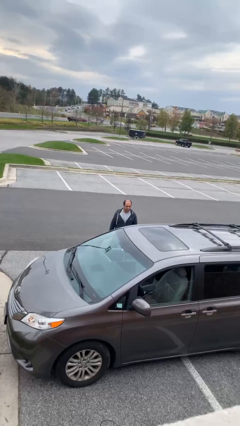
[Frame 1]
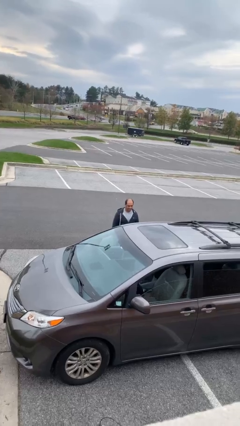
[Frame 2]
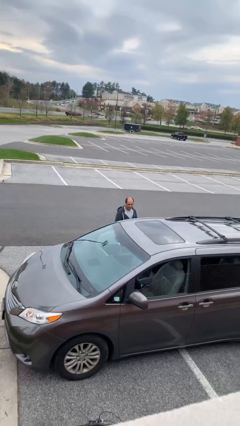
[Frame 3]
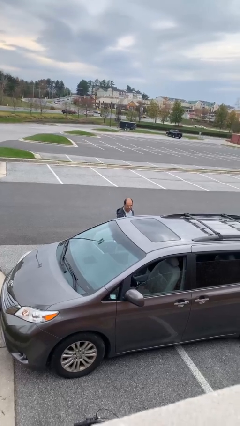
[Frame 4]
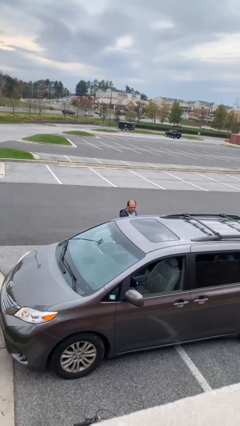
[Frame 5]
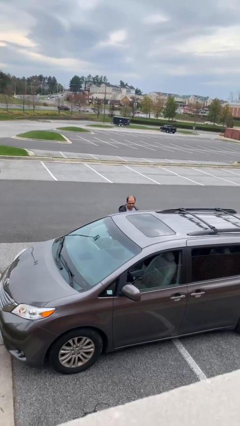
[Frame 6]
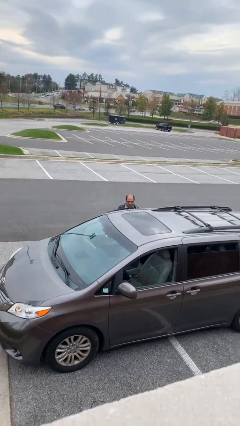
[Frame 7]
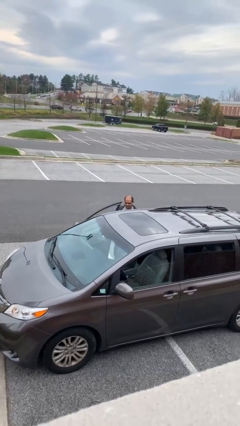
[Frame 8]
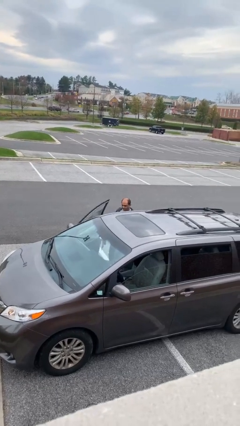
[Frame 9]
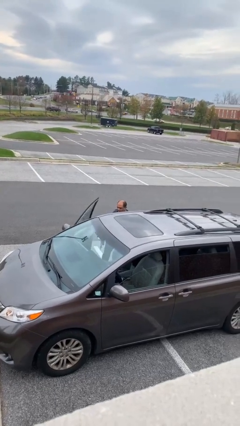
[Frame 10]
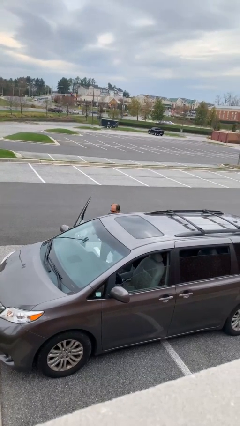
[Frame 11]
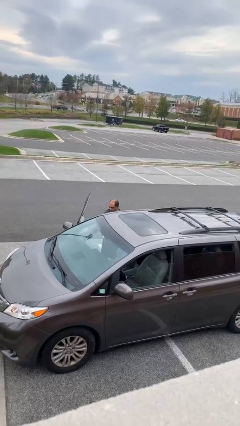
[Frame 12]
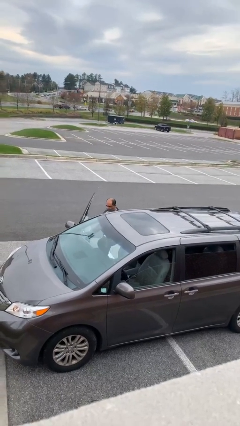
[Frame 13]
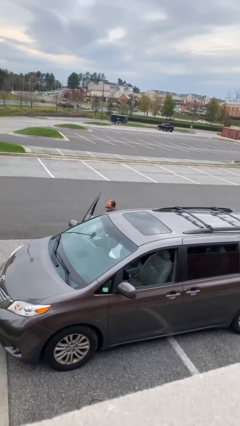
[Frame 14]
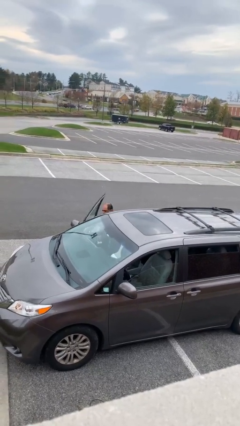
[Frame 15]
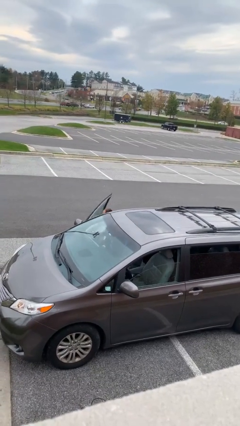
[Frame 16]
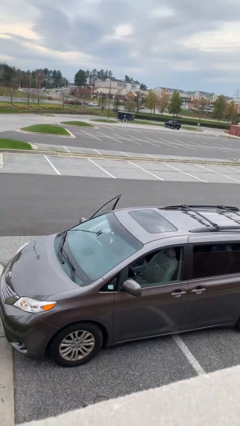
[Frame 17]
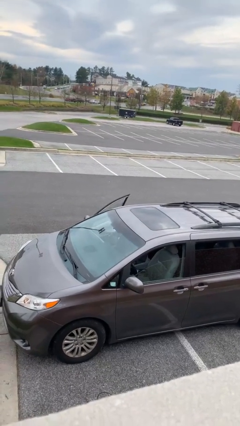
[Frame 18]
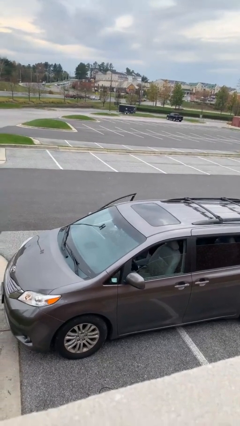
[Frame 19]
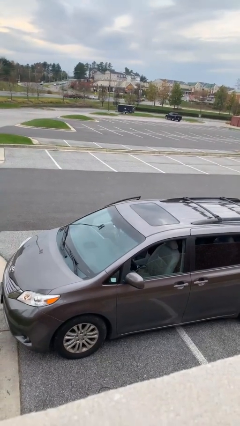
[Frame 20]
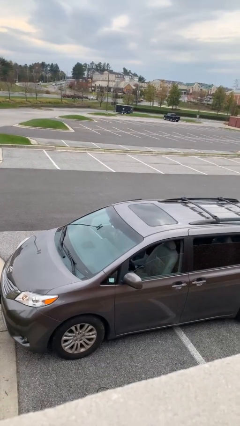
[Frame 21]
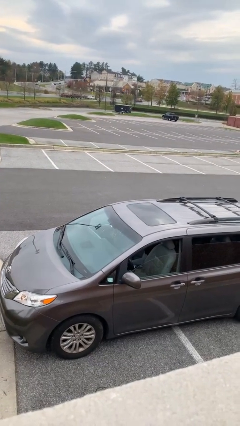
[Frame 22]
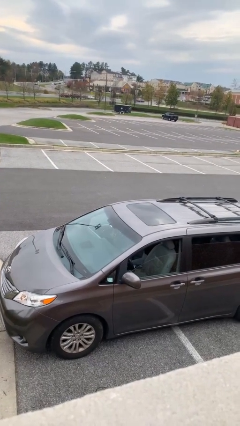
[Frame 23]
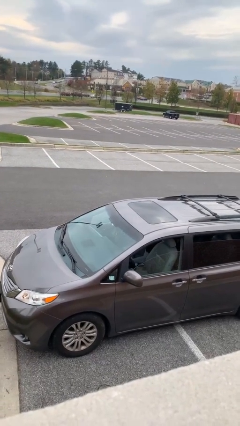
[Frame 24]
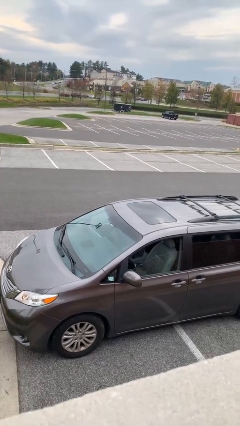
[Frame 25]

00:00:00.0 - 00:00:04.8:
car picks up person

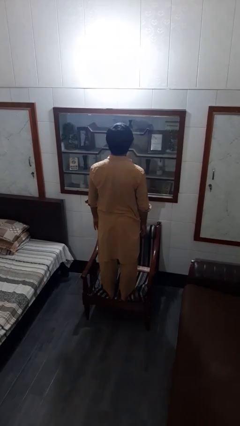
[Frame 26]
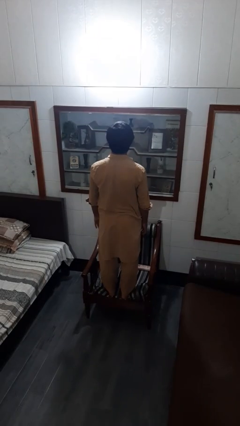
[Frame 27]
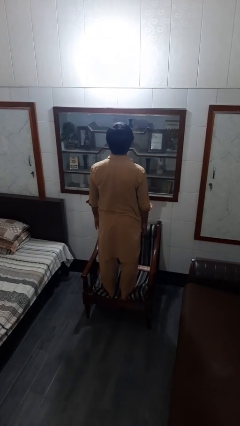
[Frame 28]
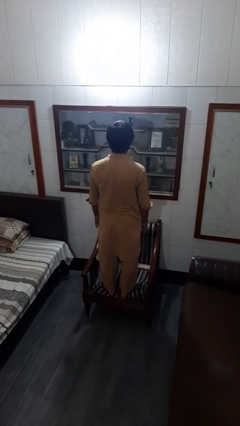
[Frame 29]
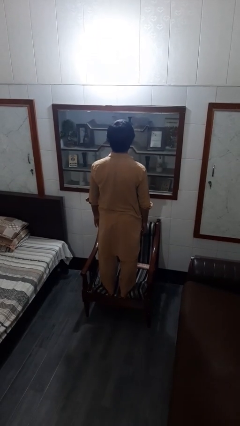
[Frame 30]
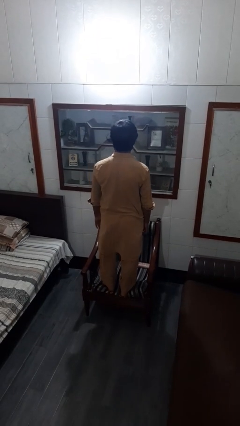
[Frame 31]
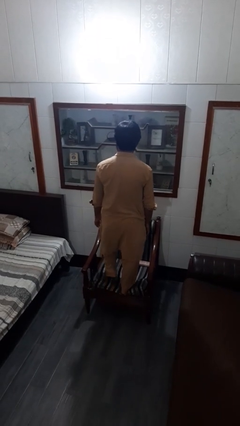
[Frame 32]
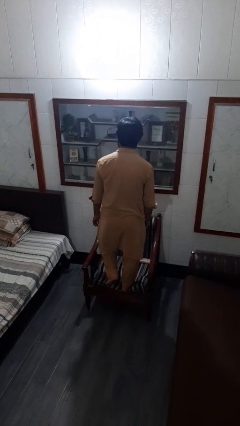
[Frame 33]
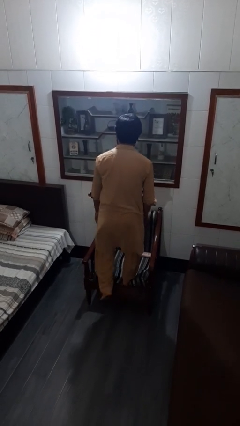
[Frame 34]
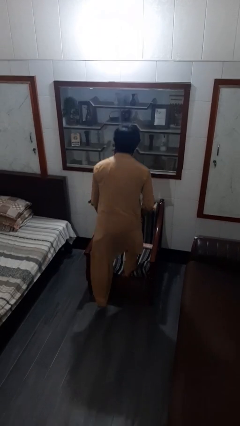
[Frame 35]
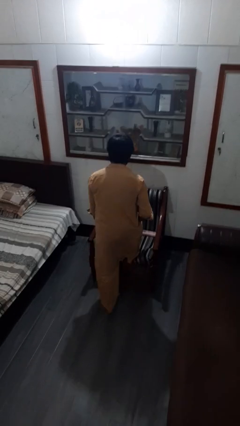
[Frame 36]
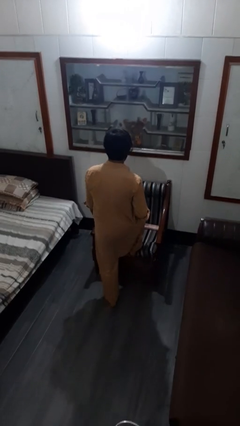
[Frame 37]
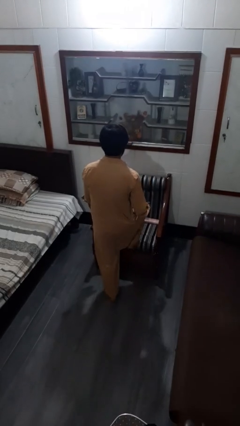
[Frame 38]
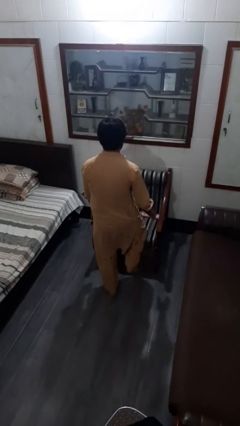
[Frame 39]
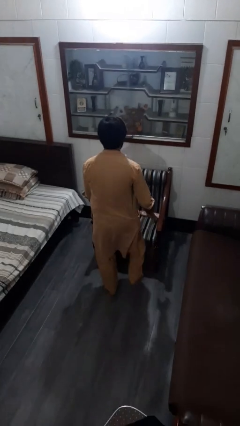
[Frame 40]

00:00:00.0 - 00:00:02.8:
person climbs off chair

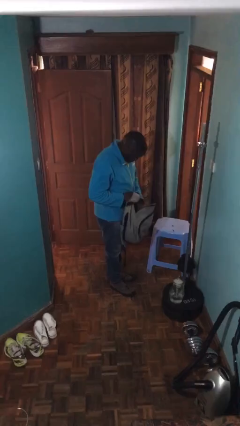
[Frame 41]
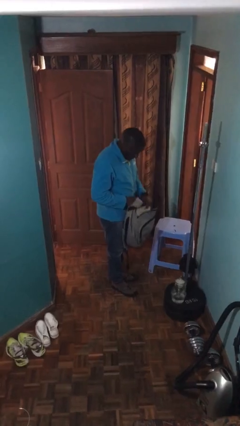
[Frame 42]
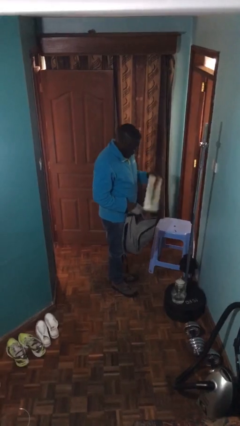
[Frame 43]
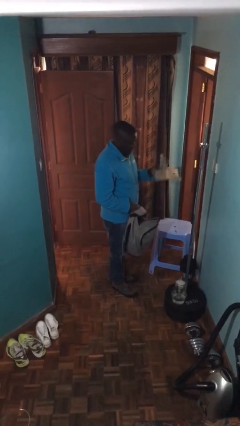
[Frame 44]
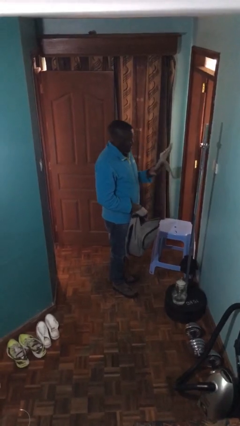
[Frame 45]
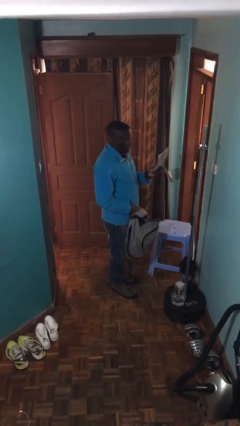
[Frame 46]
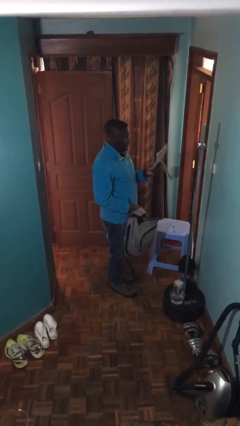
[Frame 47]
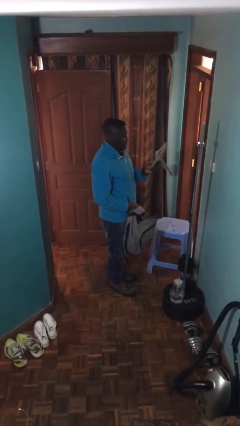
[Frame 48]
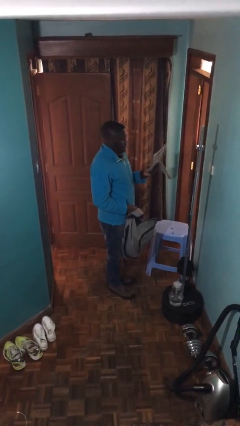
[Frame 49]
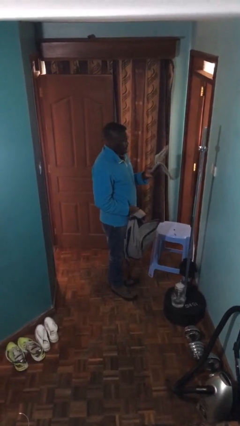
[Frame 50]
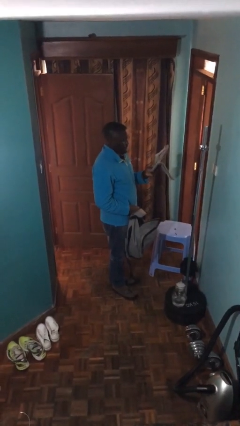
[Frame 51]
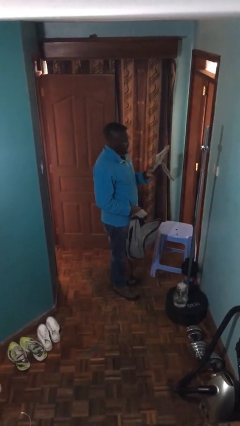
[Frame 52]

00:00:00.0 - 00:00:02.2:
person takes object from backpack

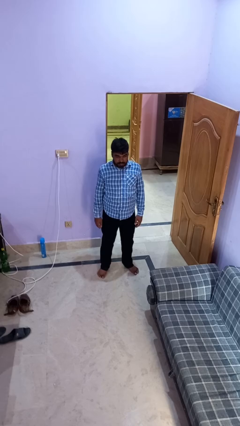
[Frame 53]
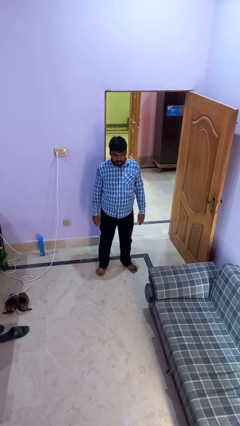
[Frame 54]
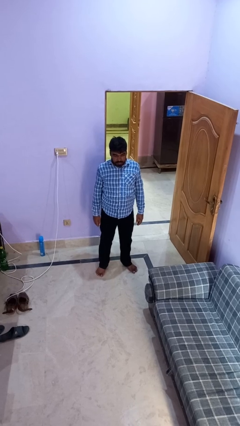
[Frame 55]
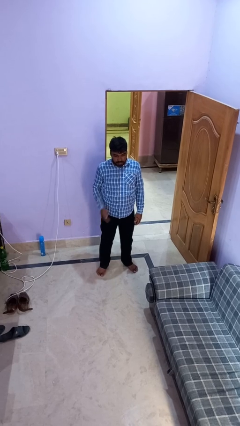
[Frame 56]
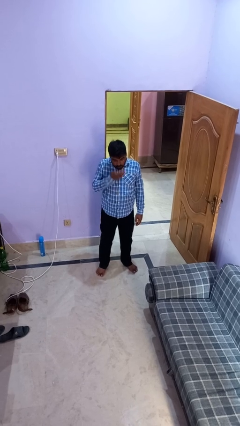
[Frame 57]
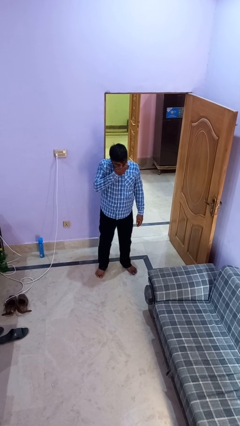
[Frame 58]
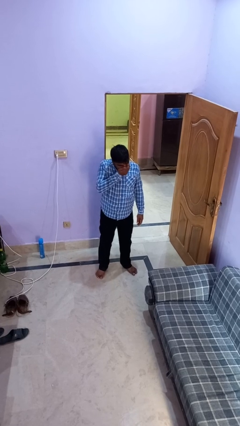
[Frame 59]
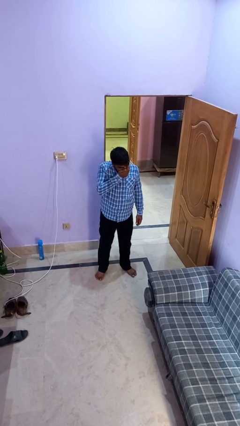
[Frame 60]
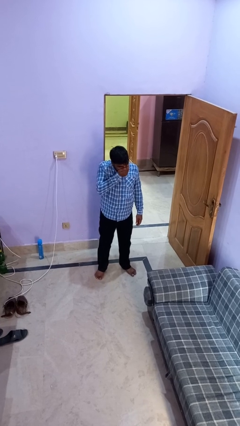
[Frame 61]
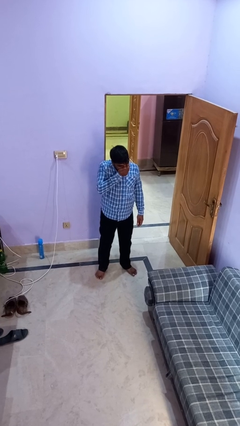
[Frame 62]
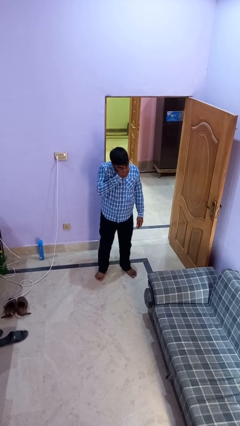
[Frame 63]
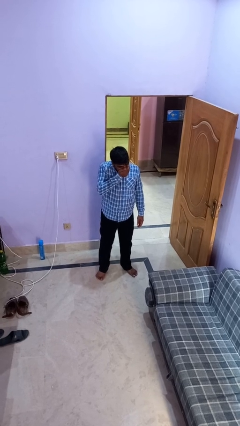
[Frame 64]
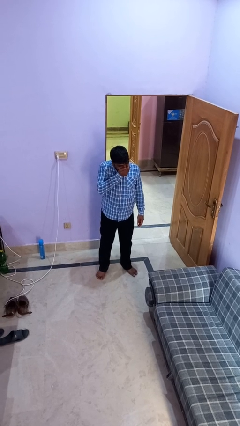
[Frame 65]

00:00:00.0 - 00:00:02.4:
person sneezes into hand

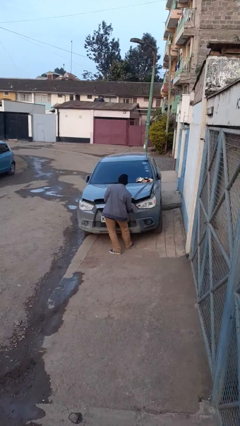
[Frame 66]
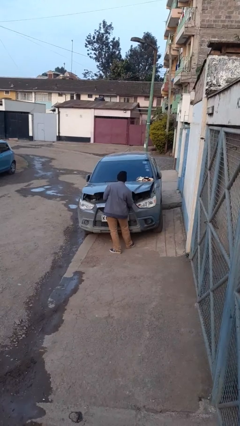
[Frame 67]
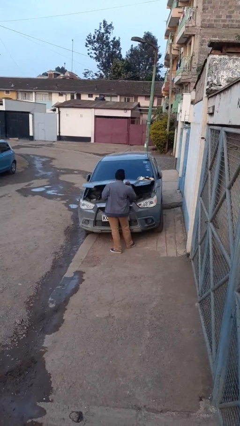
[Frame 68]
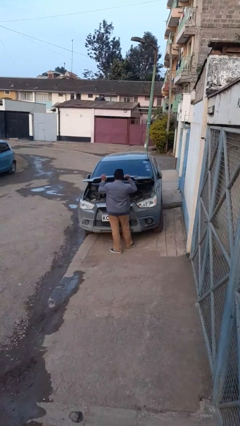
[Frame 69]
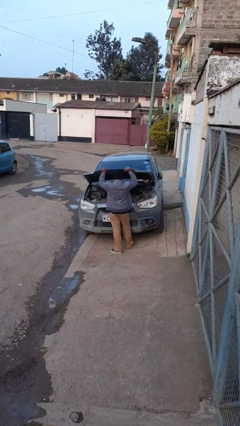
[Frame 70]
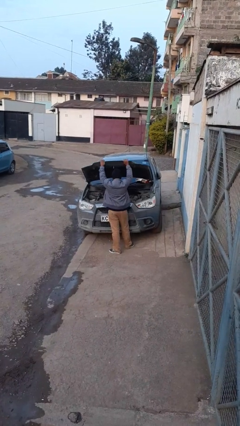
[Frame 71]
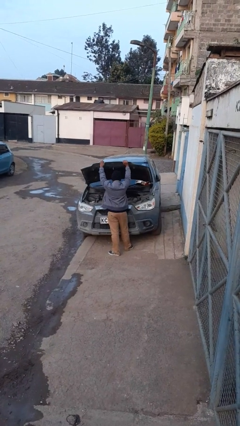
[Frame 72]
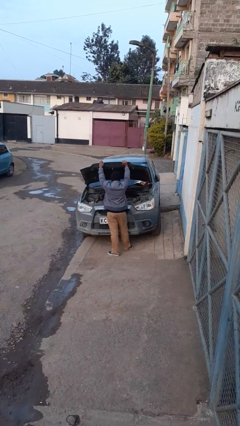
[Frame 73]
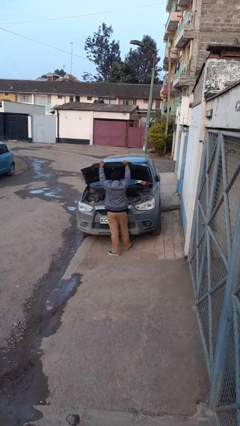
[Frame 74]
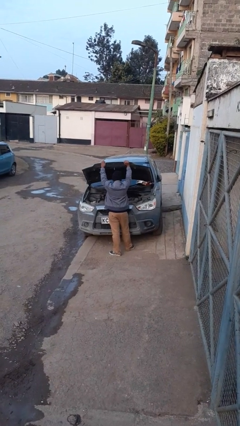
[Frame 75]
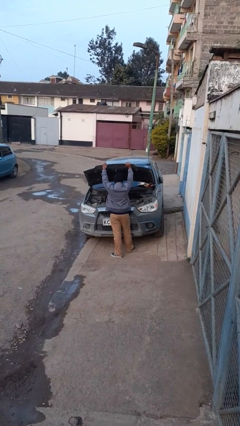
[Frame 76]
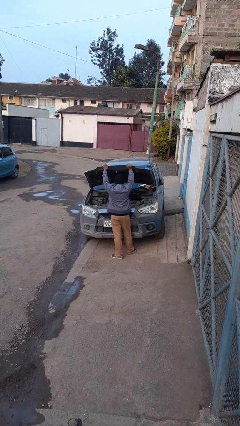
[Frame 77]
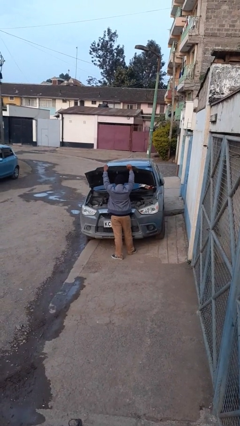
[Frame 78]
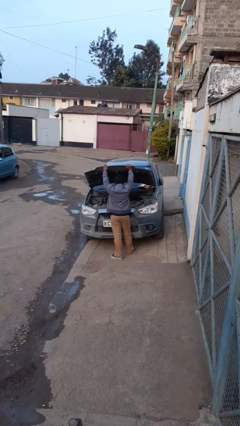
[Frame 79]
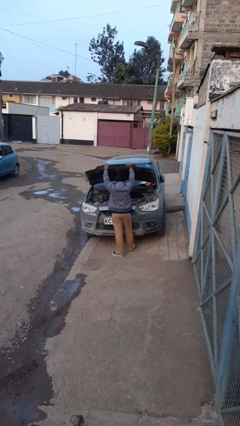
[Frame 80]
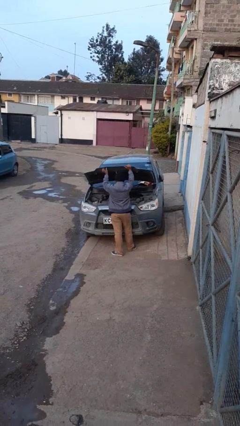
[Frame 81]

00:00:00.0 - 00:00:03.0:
person opens car hood

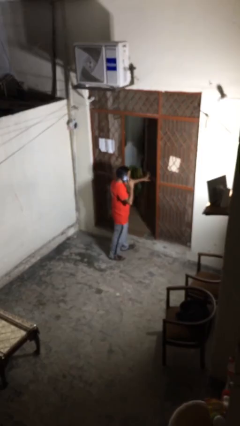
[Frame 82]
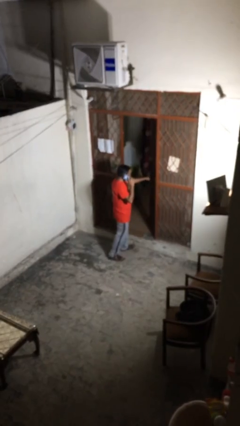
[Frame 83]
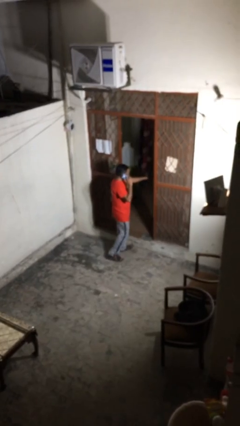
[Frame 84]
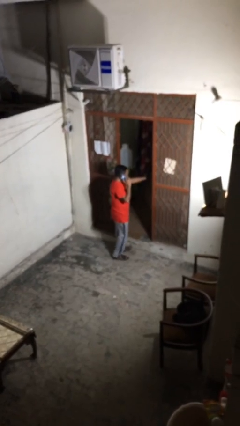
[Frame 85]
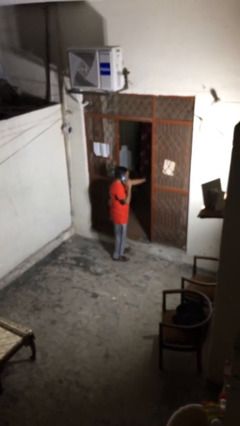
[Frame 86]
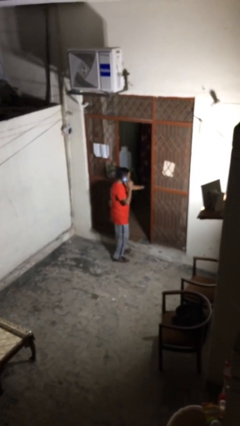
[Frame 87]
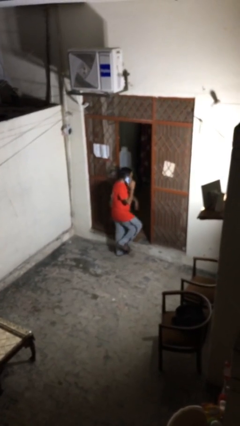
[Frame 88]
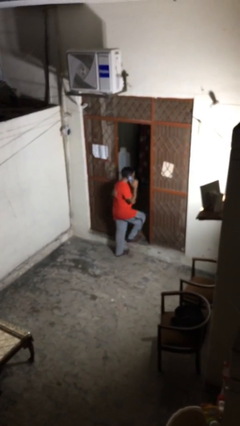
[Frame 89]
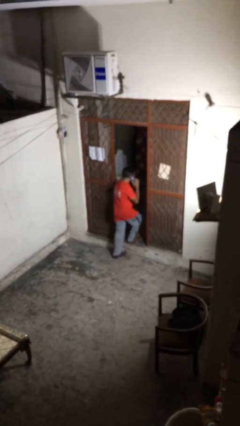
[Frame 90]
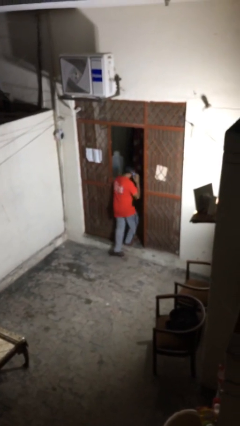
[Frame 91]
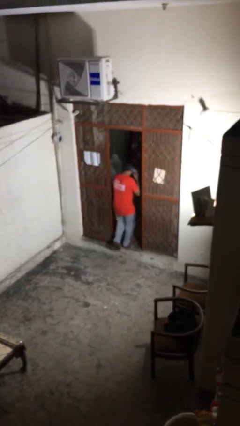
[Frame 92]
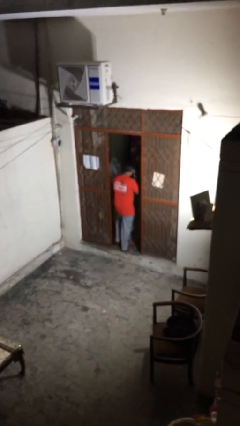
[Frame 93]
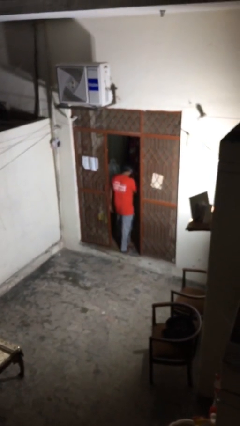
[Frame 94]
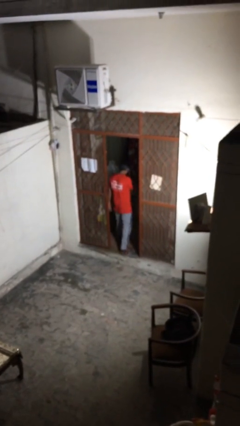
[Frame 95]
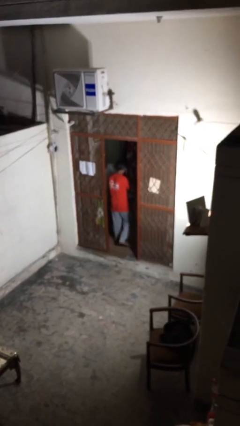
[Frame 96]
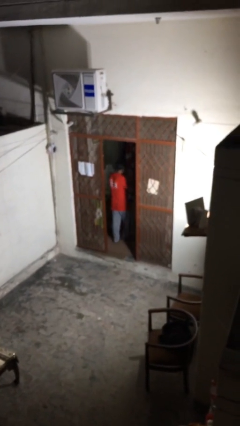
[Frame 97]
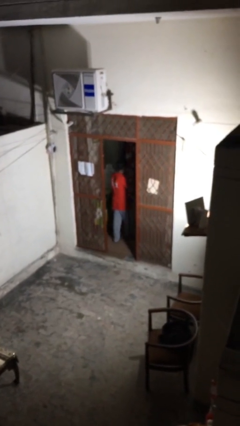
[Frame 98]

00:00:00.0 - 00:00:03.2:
person exits scene through structure
